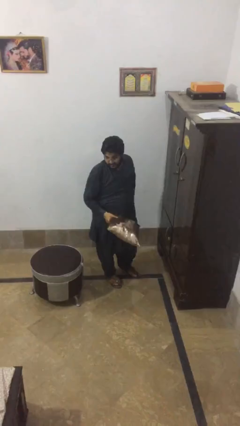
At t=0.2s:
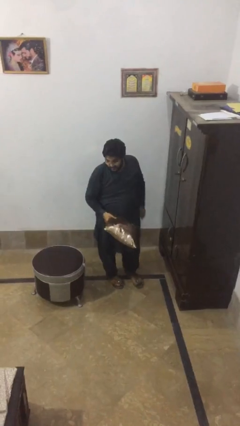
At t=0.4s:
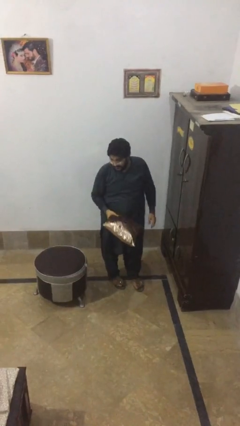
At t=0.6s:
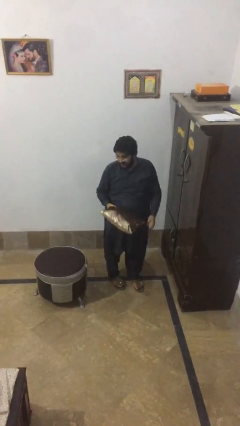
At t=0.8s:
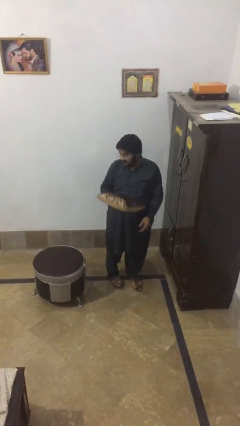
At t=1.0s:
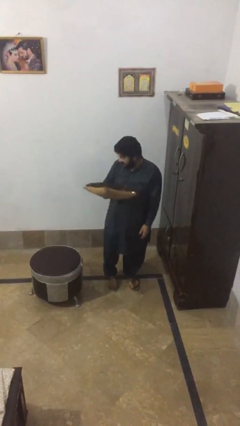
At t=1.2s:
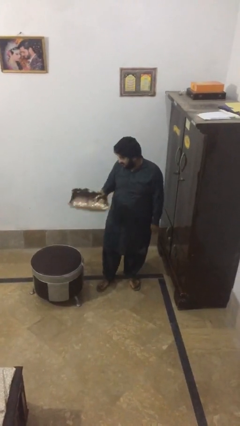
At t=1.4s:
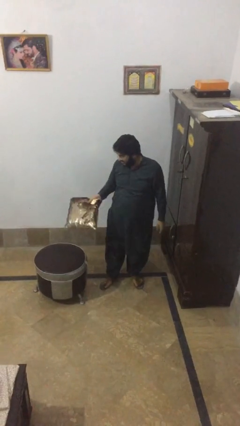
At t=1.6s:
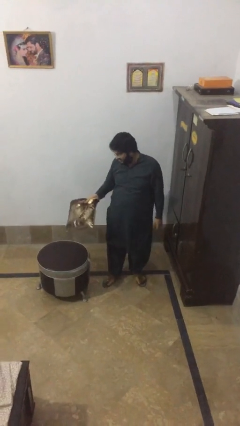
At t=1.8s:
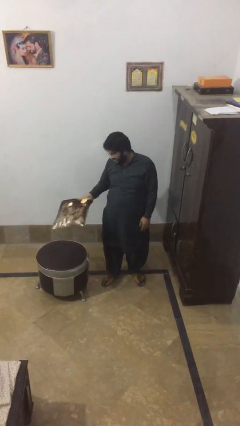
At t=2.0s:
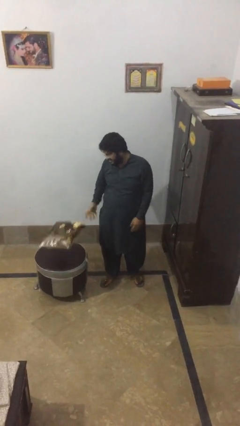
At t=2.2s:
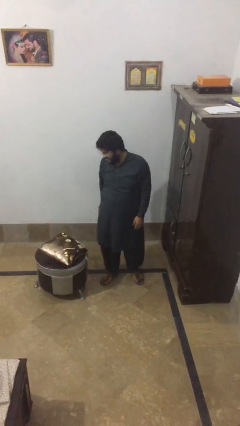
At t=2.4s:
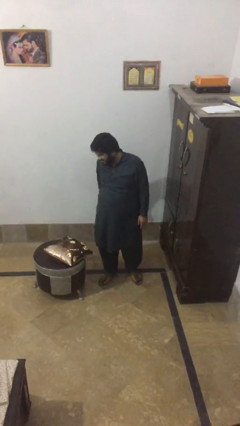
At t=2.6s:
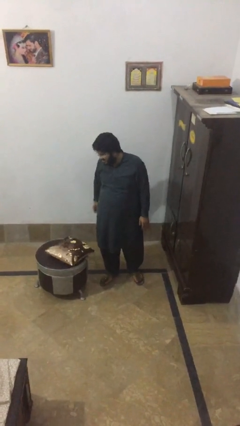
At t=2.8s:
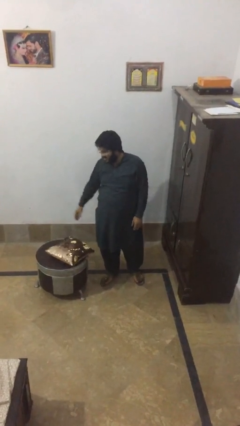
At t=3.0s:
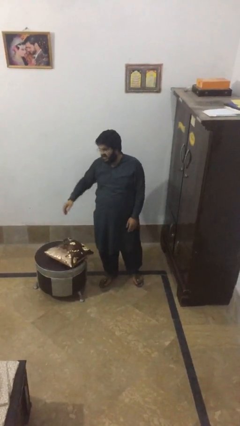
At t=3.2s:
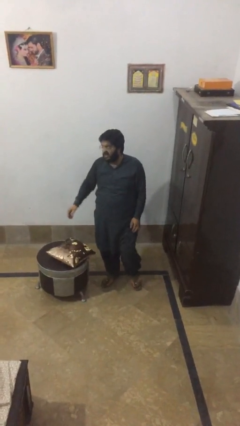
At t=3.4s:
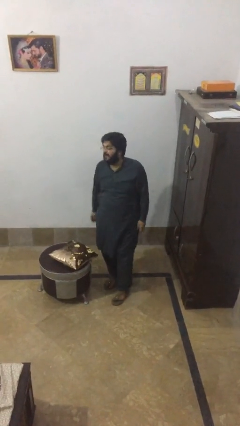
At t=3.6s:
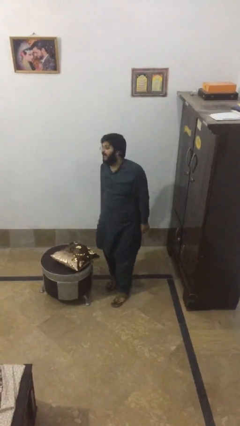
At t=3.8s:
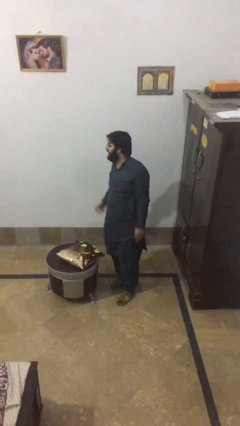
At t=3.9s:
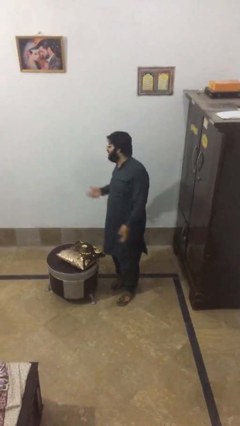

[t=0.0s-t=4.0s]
person puts down object on table

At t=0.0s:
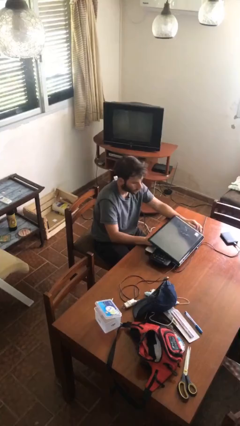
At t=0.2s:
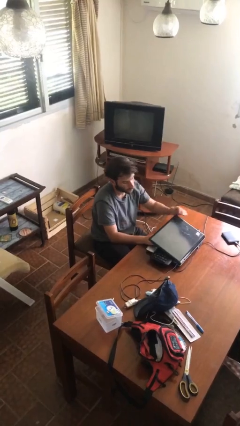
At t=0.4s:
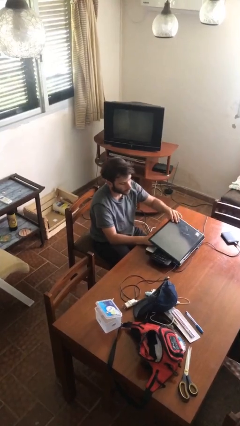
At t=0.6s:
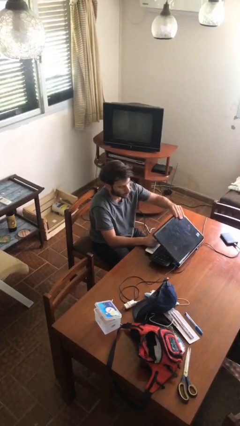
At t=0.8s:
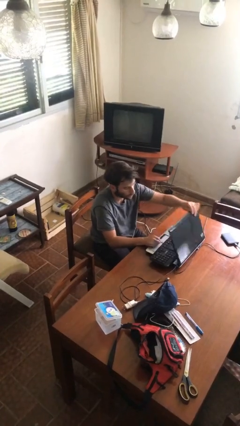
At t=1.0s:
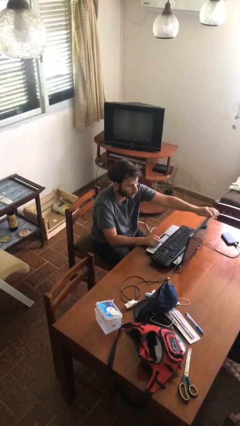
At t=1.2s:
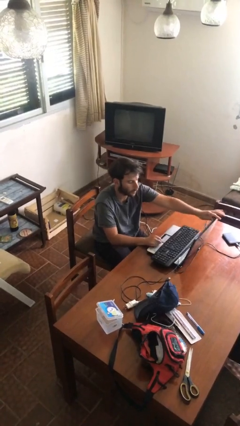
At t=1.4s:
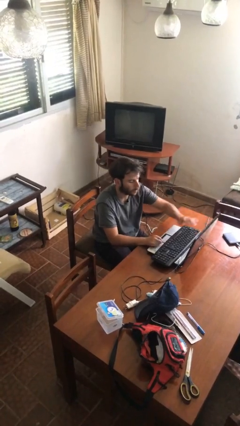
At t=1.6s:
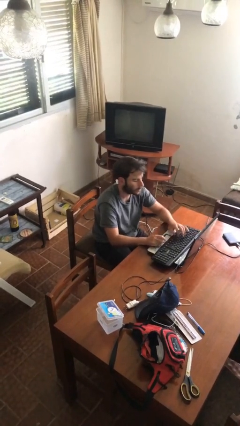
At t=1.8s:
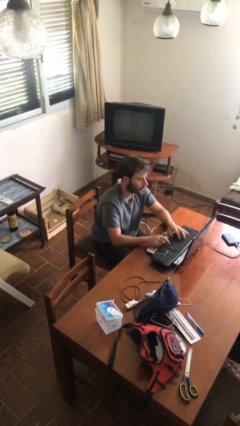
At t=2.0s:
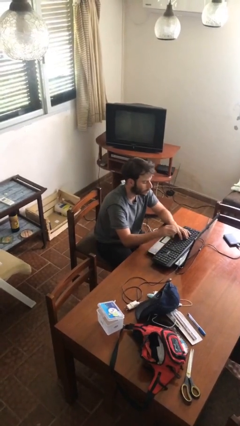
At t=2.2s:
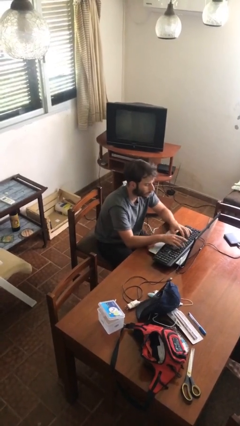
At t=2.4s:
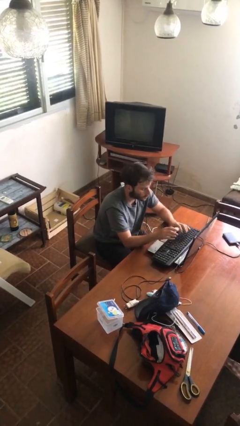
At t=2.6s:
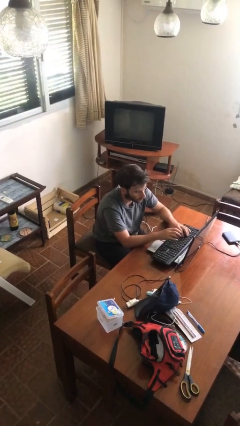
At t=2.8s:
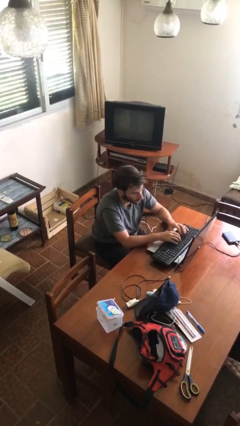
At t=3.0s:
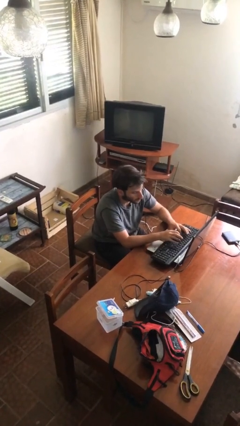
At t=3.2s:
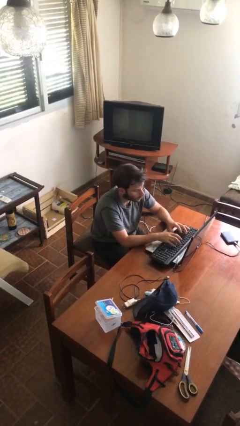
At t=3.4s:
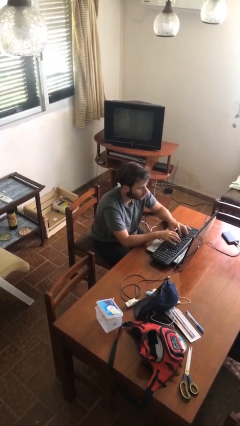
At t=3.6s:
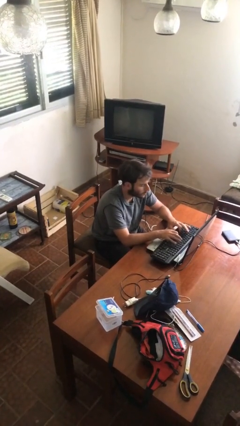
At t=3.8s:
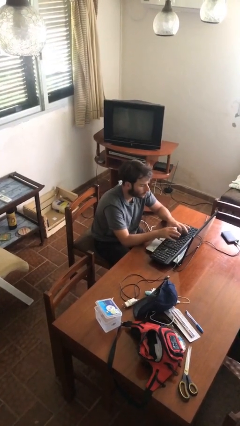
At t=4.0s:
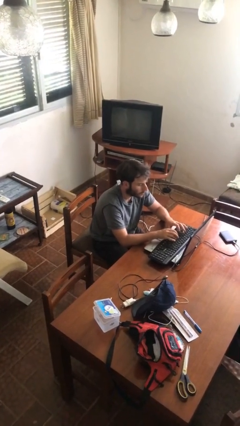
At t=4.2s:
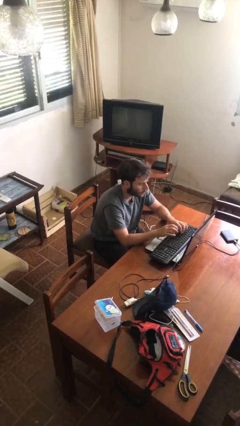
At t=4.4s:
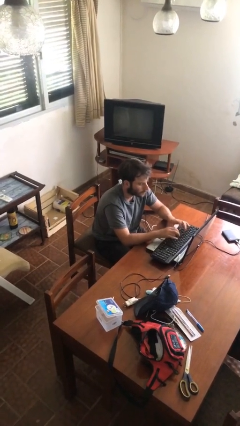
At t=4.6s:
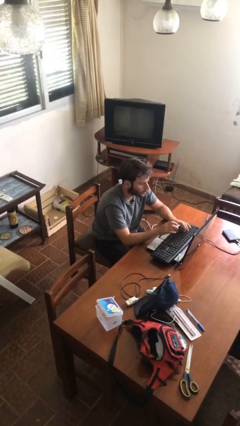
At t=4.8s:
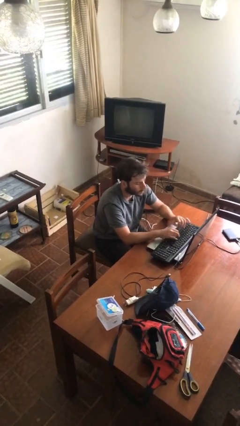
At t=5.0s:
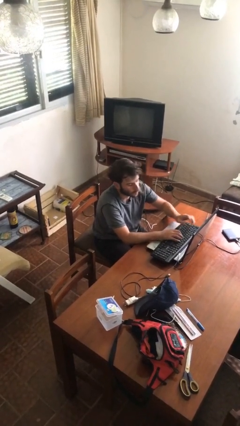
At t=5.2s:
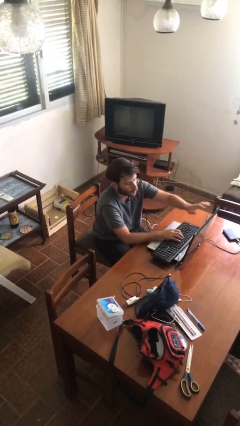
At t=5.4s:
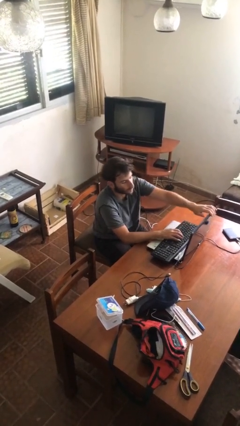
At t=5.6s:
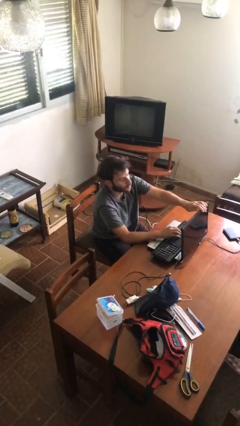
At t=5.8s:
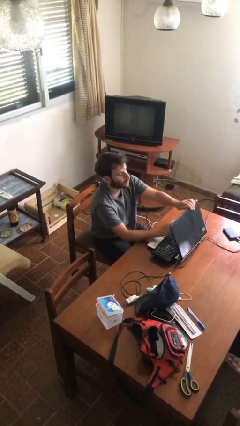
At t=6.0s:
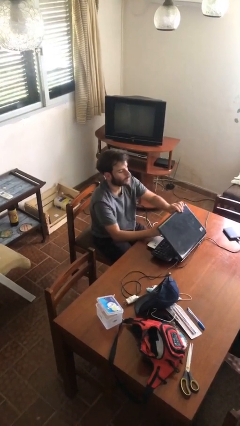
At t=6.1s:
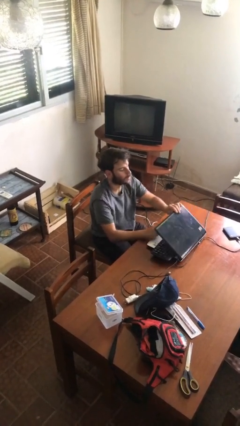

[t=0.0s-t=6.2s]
person interacts with laptop

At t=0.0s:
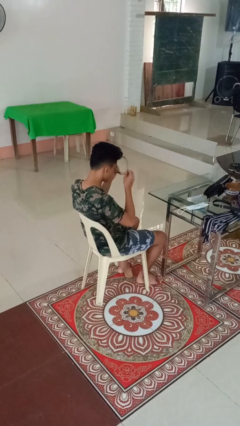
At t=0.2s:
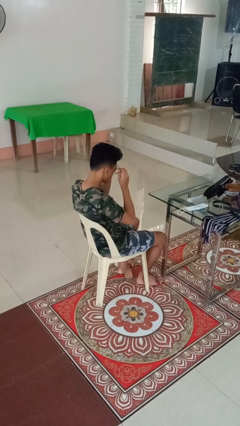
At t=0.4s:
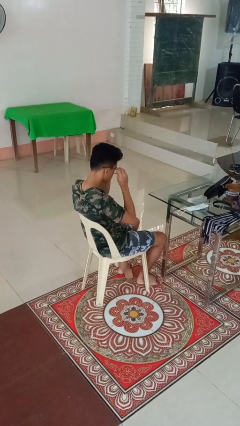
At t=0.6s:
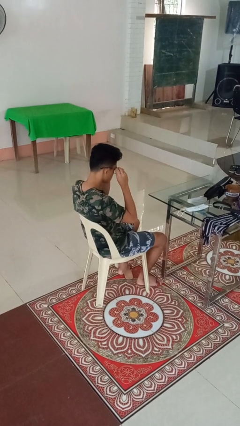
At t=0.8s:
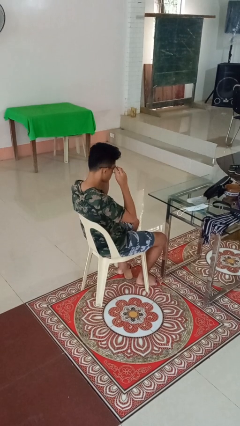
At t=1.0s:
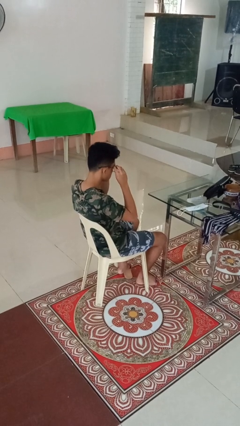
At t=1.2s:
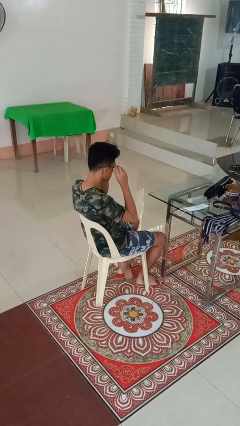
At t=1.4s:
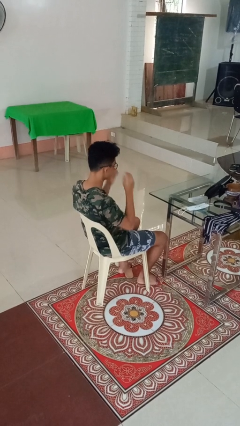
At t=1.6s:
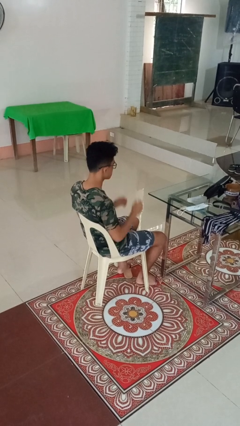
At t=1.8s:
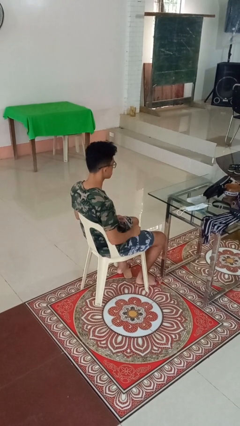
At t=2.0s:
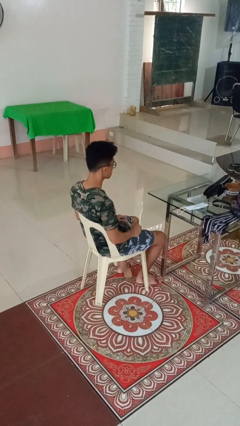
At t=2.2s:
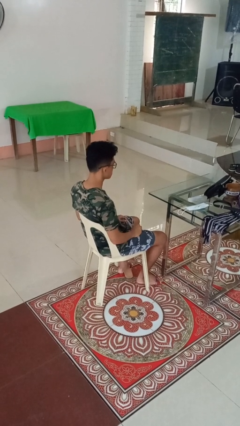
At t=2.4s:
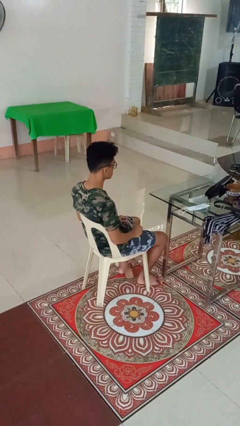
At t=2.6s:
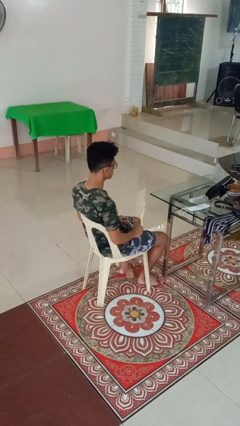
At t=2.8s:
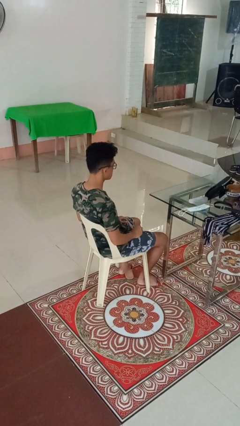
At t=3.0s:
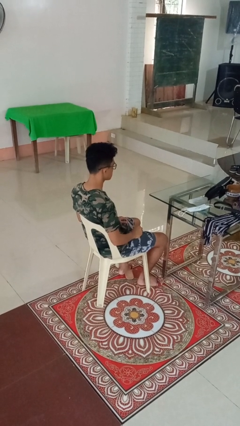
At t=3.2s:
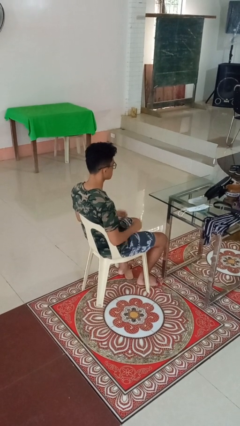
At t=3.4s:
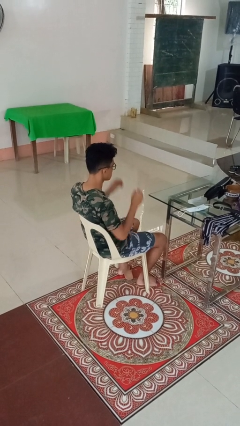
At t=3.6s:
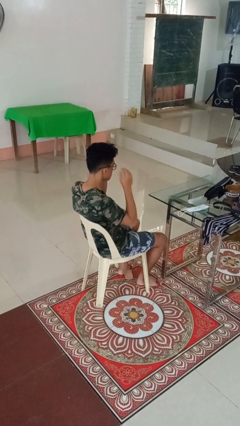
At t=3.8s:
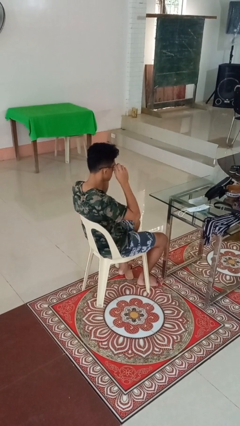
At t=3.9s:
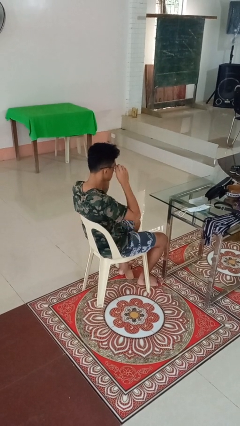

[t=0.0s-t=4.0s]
person puts on glasses

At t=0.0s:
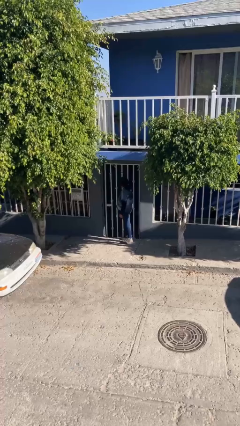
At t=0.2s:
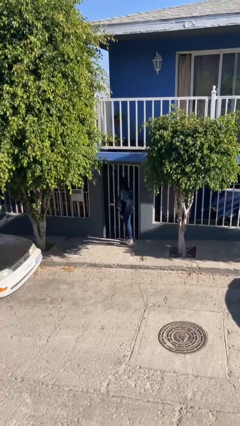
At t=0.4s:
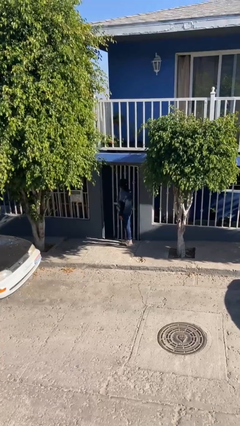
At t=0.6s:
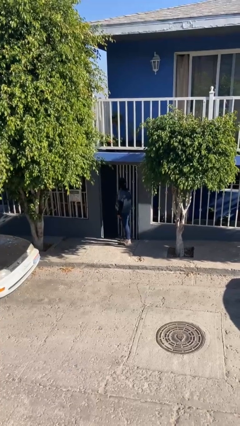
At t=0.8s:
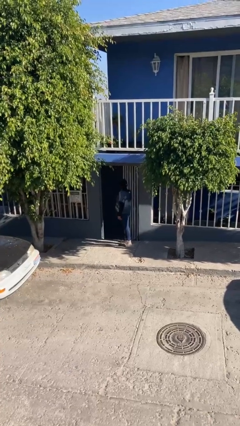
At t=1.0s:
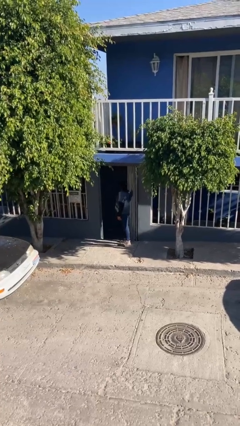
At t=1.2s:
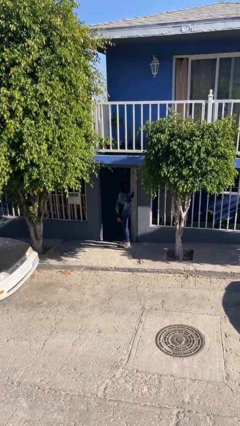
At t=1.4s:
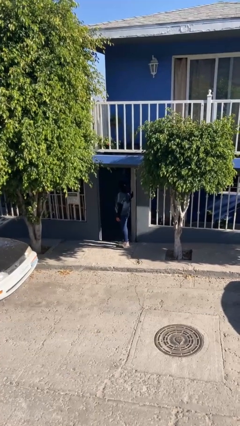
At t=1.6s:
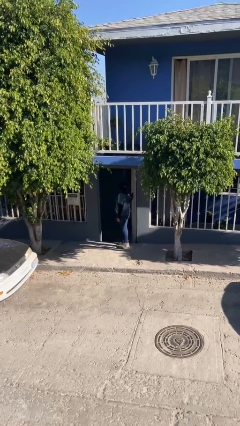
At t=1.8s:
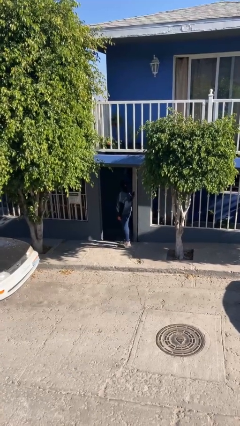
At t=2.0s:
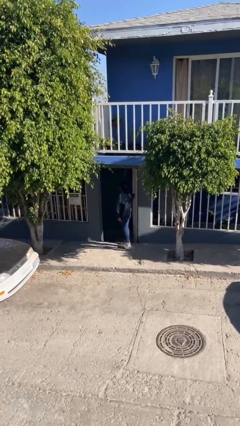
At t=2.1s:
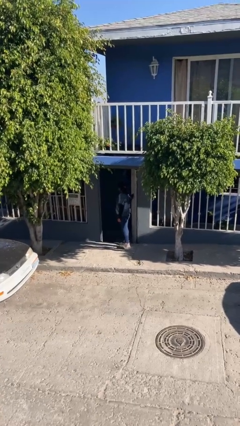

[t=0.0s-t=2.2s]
person opens facility door

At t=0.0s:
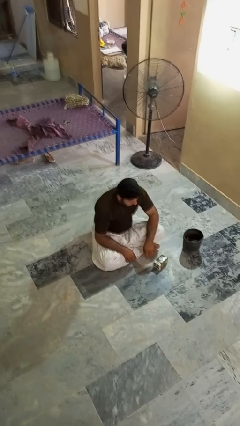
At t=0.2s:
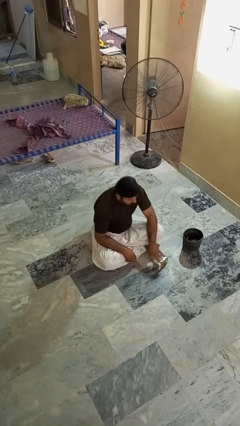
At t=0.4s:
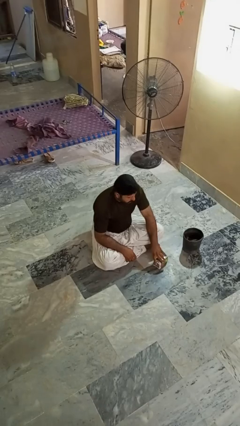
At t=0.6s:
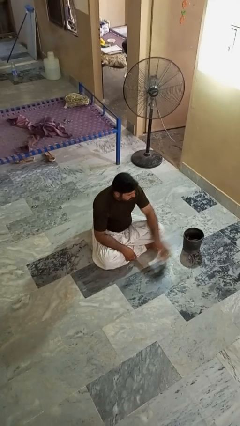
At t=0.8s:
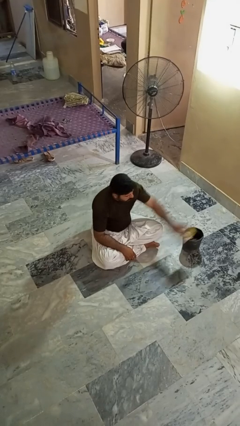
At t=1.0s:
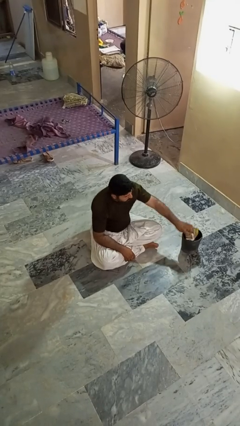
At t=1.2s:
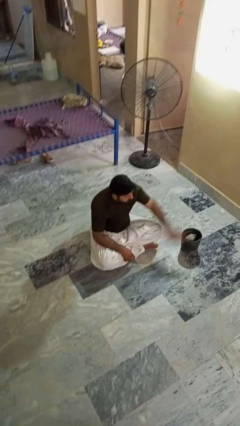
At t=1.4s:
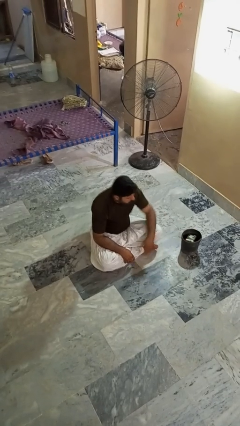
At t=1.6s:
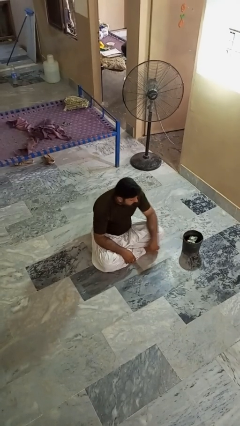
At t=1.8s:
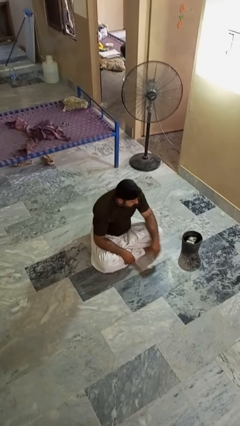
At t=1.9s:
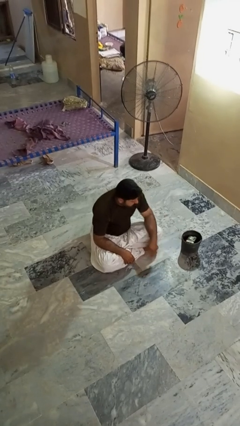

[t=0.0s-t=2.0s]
person puts object into basket
